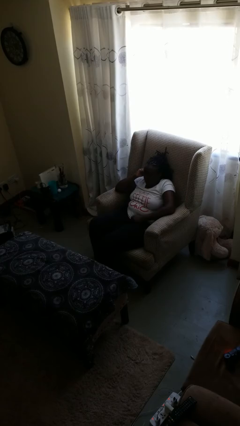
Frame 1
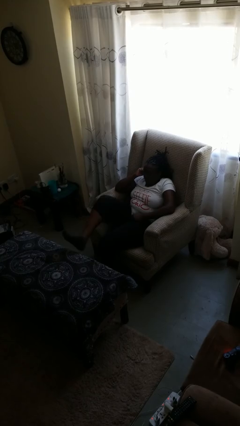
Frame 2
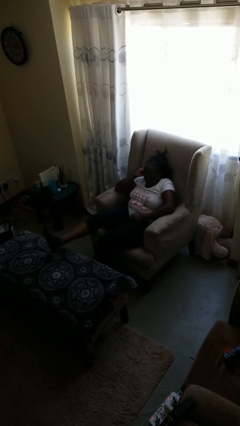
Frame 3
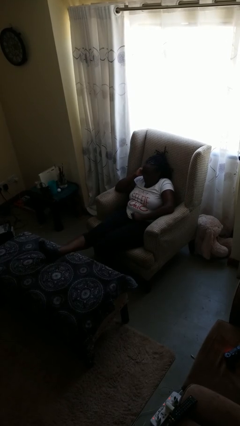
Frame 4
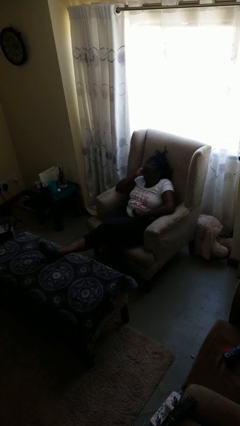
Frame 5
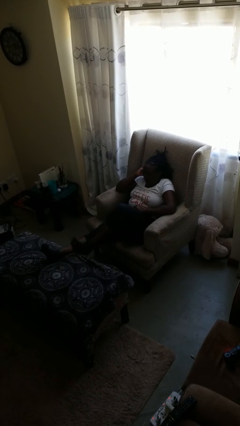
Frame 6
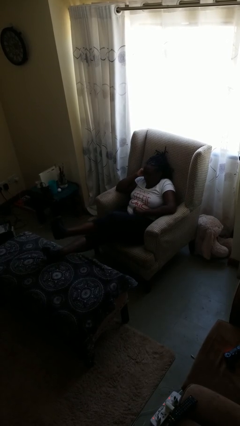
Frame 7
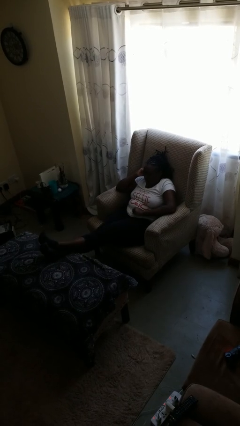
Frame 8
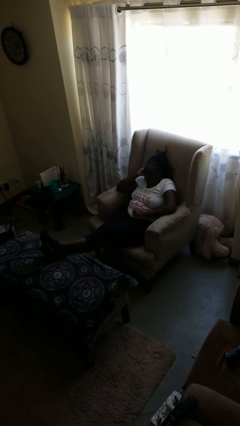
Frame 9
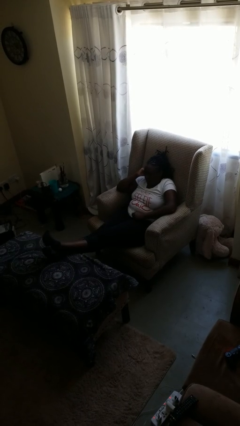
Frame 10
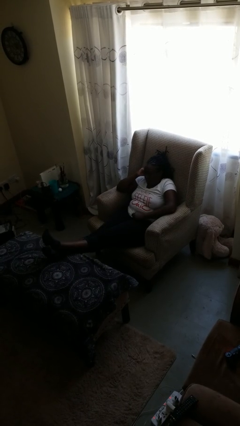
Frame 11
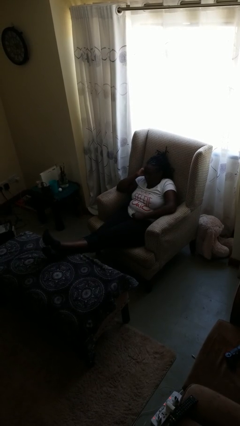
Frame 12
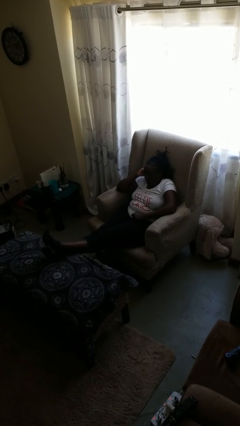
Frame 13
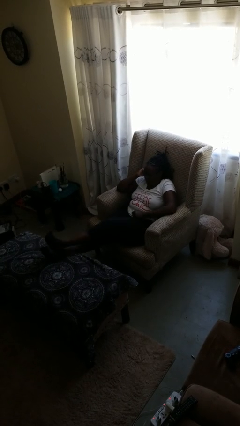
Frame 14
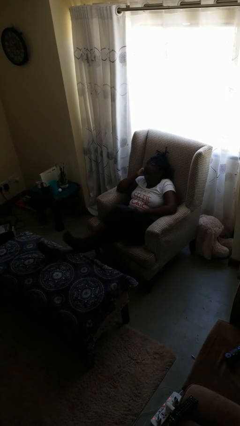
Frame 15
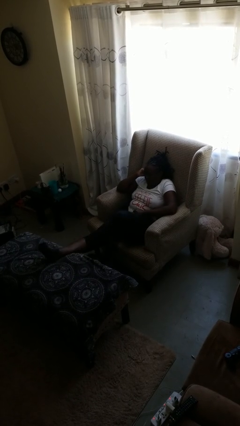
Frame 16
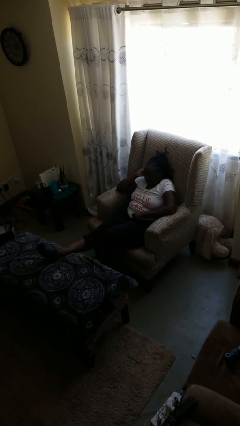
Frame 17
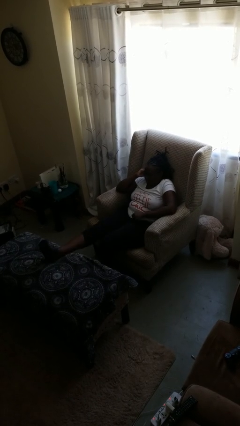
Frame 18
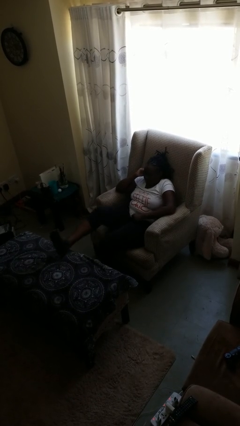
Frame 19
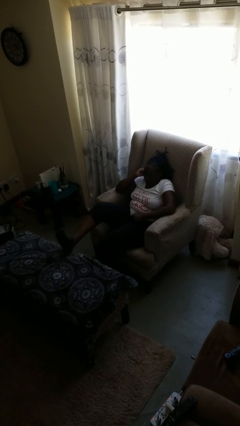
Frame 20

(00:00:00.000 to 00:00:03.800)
person puts feet up

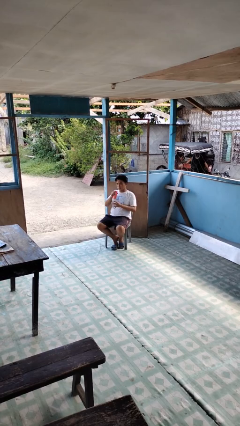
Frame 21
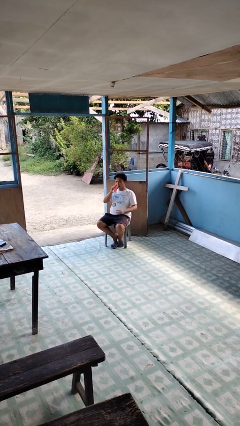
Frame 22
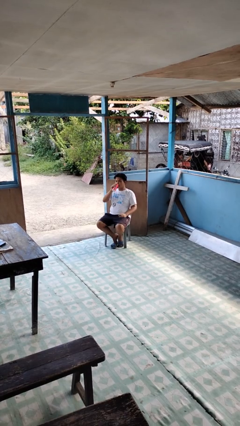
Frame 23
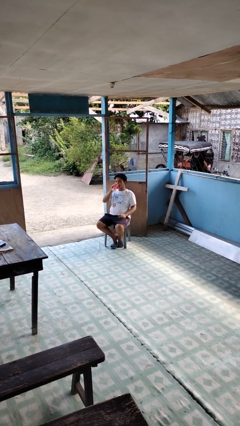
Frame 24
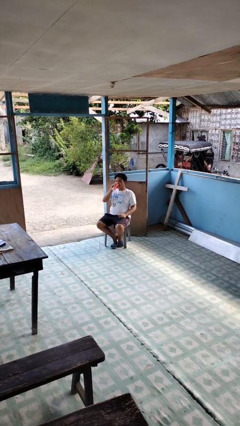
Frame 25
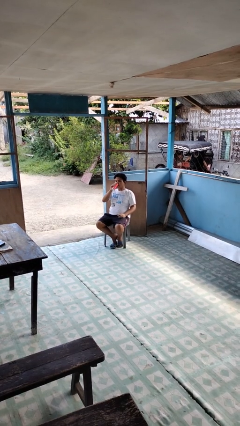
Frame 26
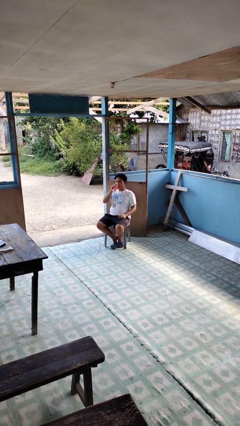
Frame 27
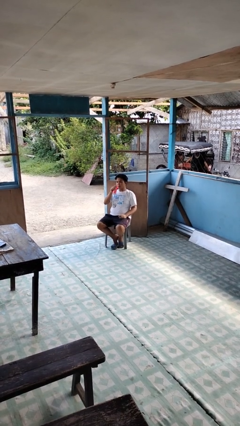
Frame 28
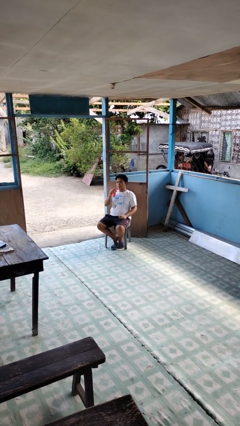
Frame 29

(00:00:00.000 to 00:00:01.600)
person drinks from beverage can

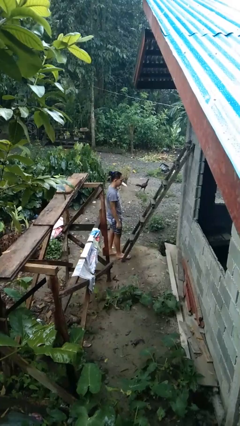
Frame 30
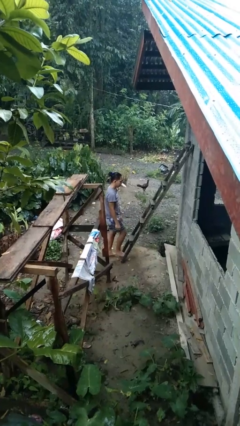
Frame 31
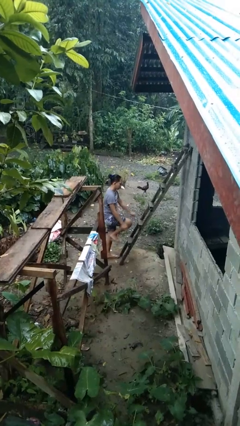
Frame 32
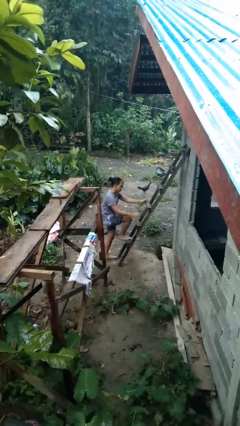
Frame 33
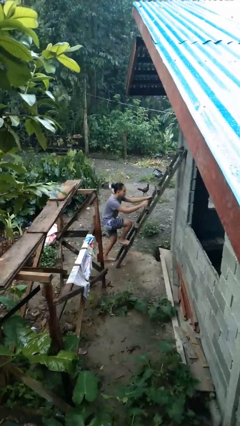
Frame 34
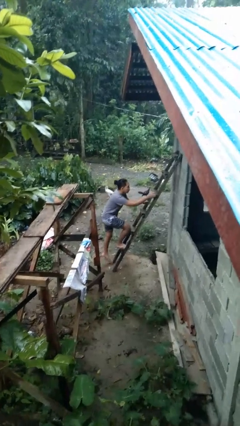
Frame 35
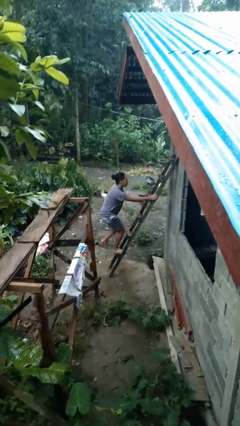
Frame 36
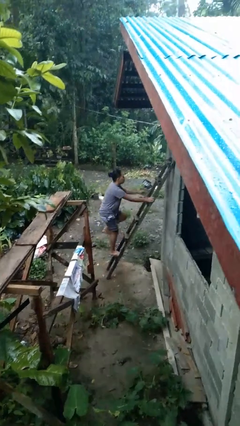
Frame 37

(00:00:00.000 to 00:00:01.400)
person climbs up ladder

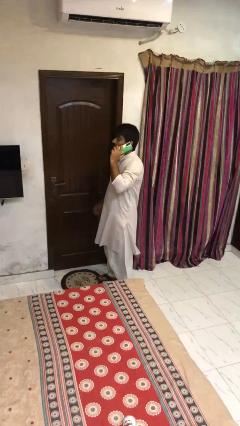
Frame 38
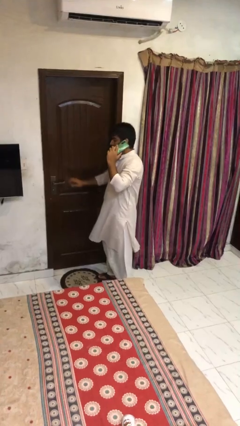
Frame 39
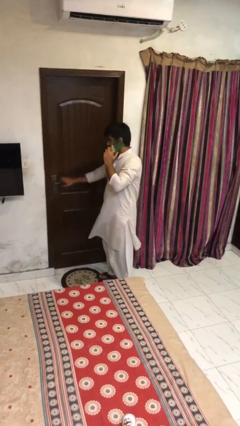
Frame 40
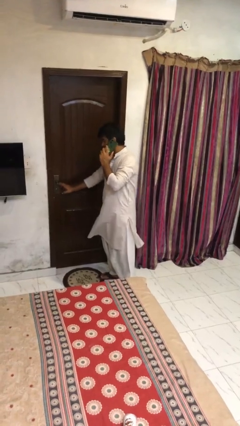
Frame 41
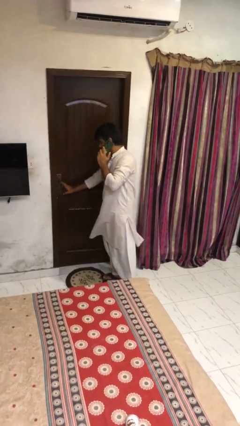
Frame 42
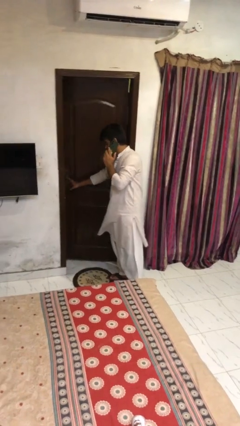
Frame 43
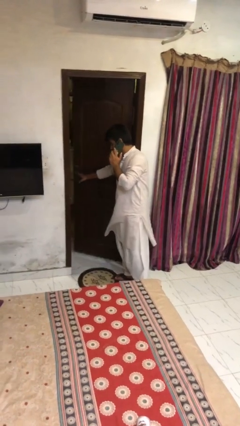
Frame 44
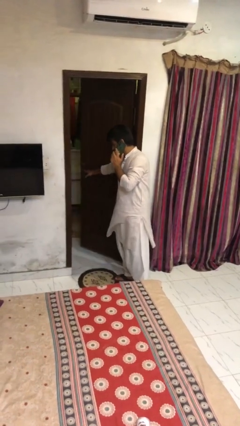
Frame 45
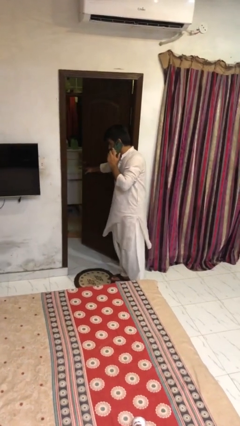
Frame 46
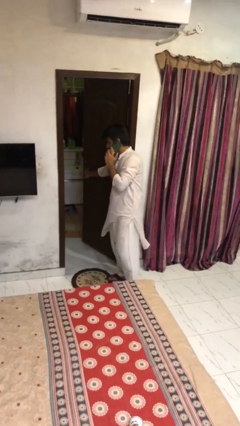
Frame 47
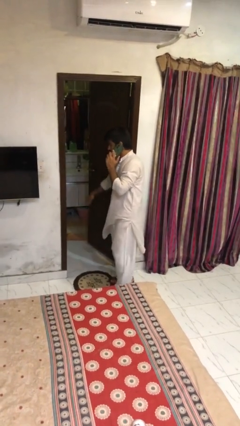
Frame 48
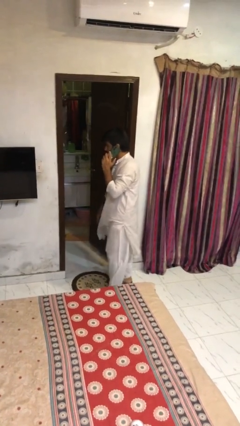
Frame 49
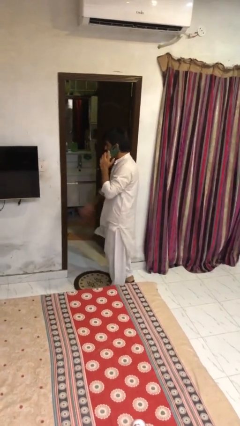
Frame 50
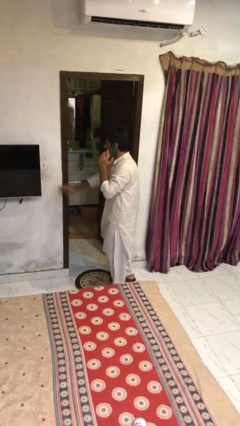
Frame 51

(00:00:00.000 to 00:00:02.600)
person opens facility door

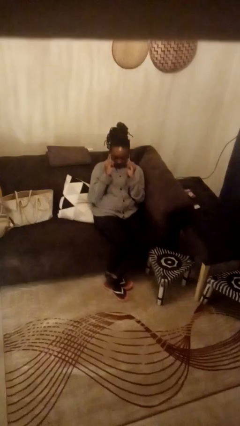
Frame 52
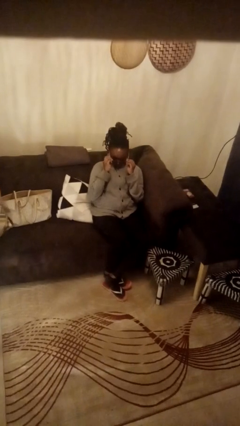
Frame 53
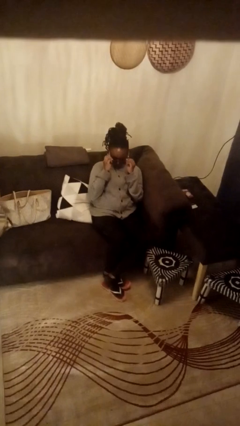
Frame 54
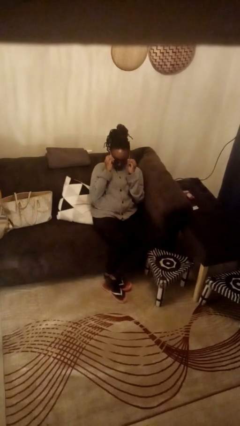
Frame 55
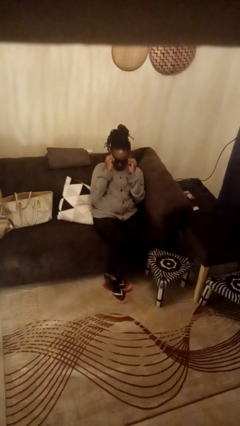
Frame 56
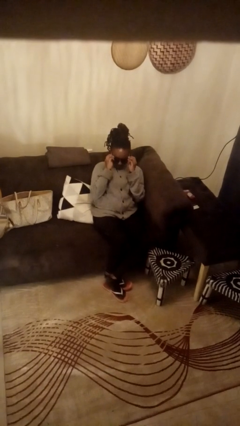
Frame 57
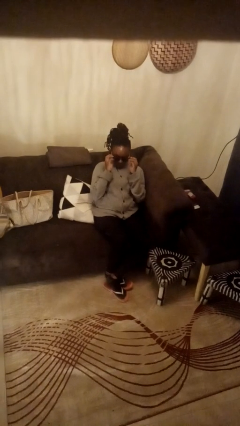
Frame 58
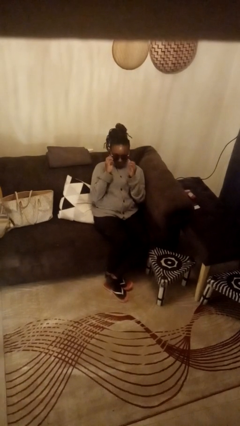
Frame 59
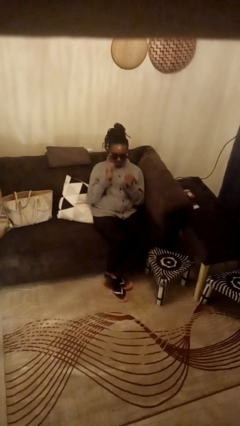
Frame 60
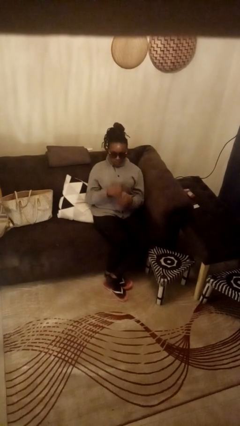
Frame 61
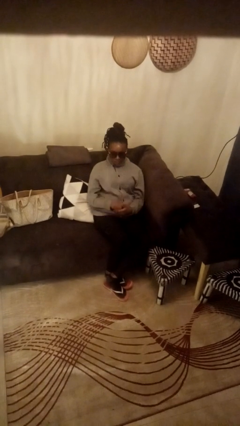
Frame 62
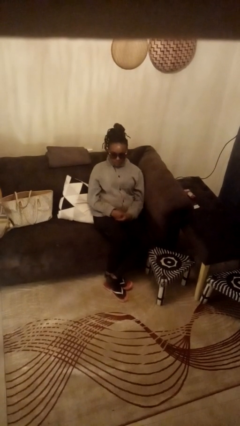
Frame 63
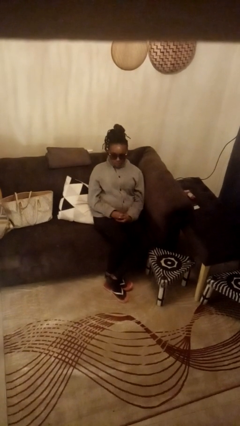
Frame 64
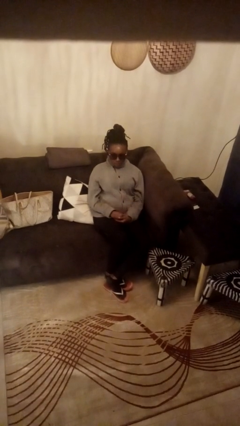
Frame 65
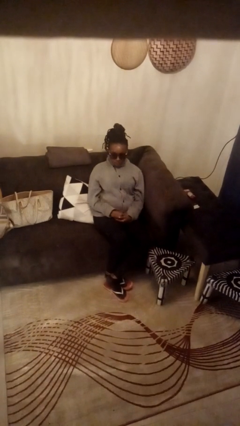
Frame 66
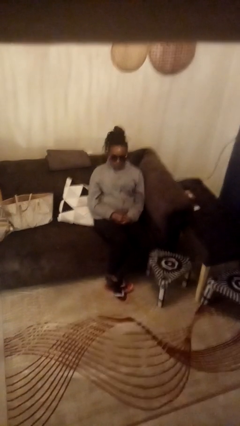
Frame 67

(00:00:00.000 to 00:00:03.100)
person puts on sunglasses

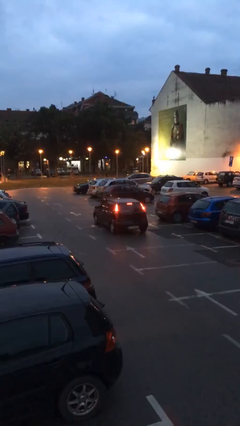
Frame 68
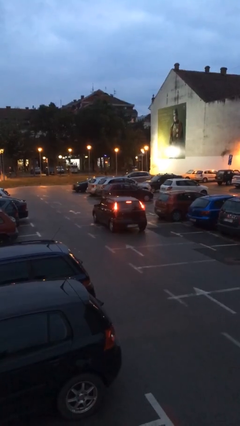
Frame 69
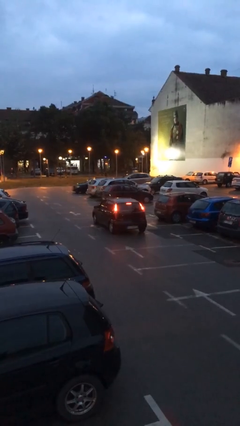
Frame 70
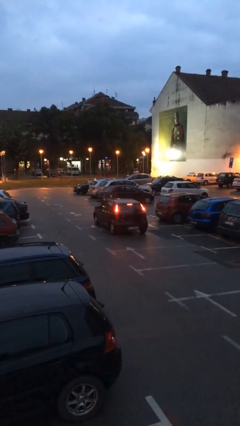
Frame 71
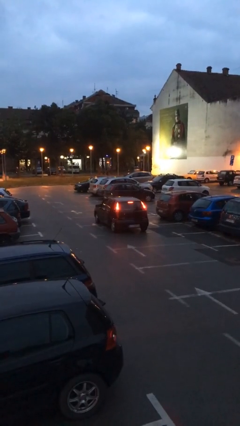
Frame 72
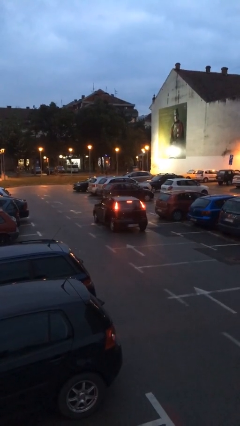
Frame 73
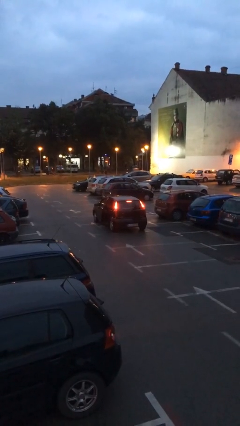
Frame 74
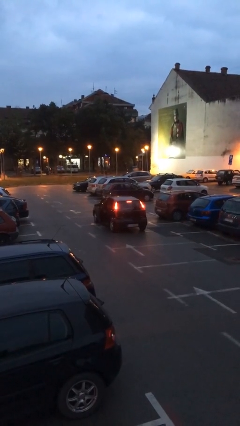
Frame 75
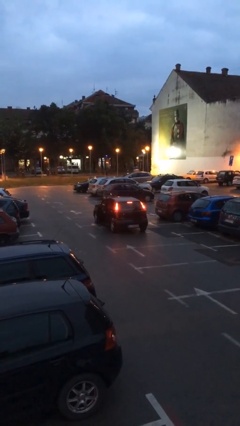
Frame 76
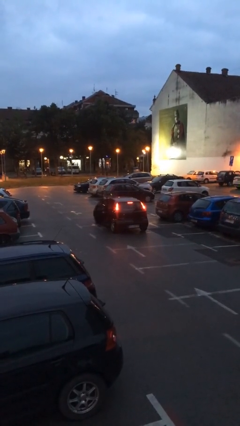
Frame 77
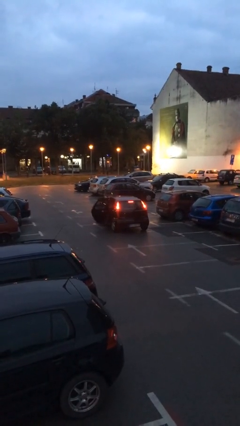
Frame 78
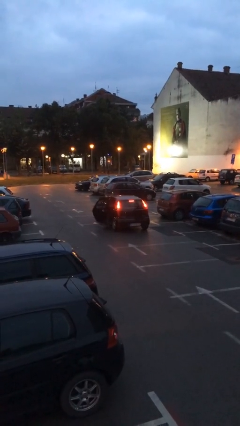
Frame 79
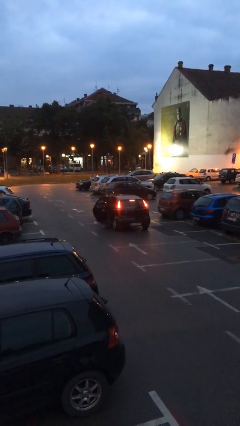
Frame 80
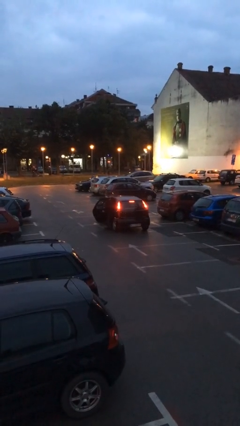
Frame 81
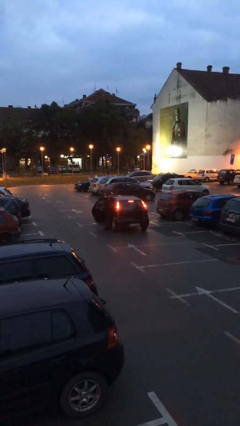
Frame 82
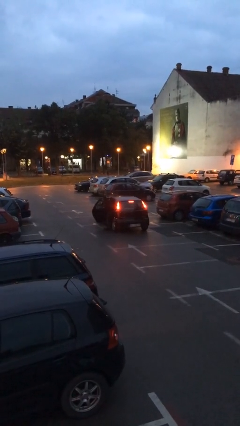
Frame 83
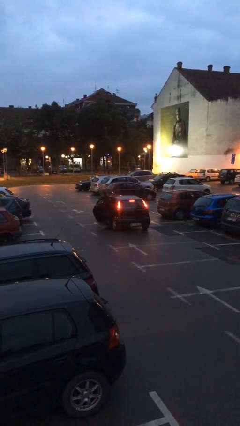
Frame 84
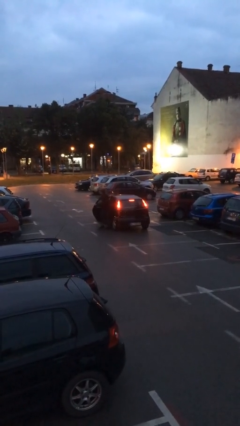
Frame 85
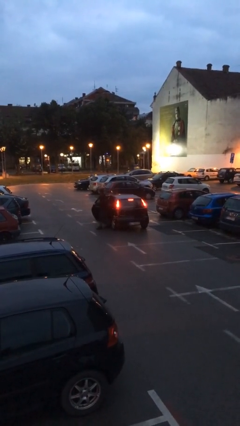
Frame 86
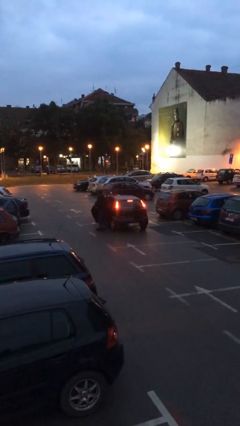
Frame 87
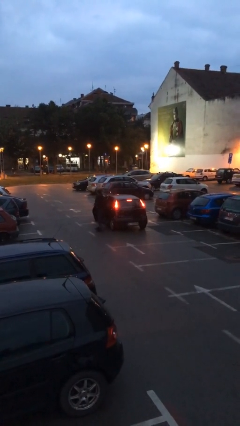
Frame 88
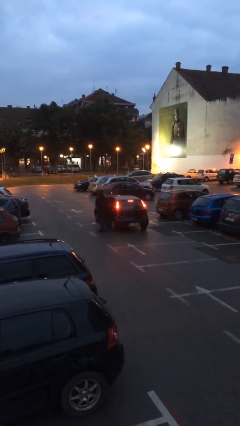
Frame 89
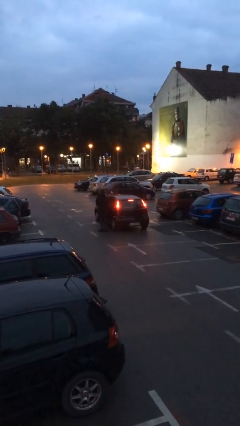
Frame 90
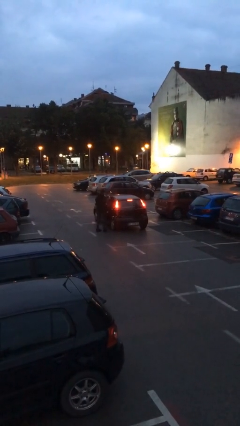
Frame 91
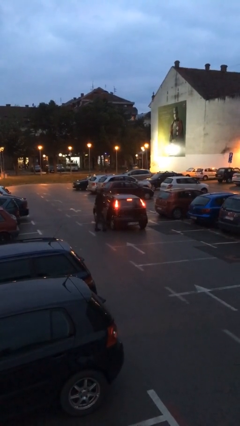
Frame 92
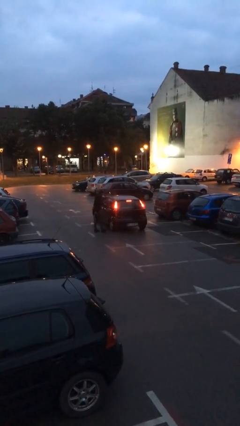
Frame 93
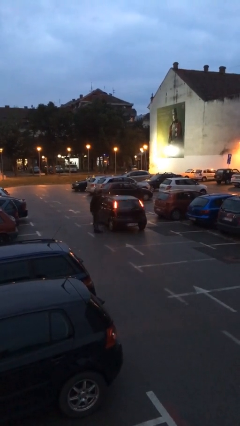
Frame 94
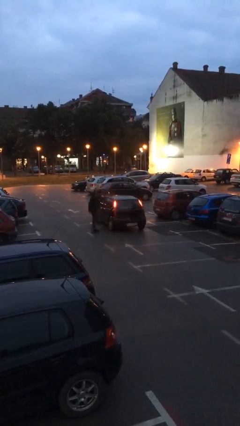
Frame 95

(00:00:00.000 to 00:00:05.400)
car drops off person
